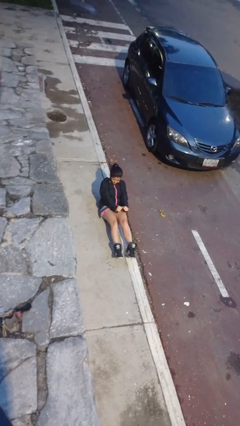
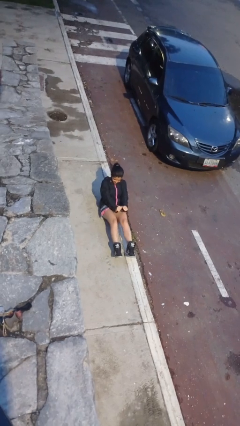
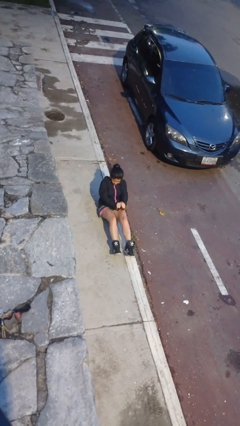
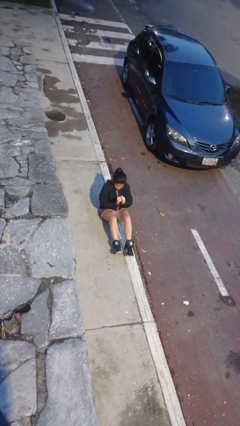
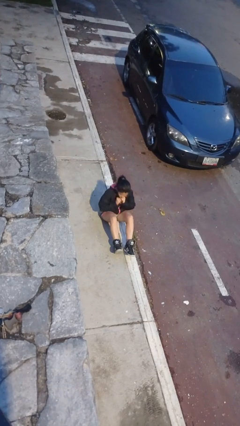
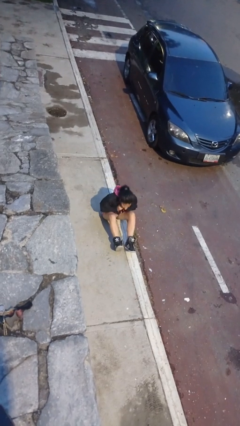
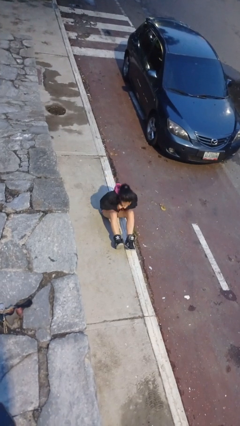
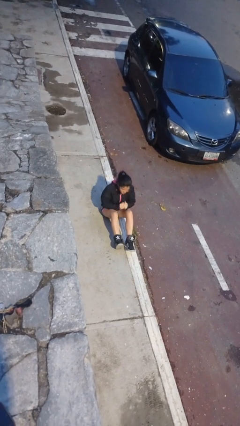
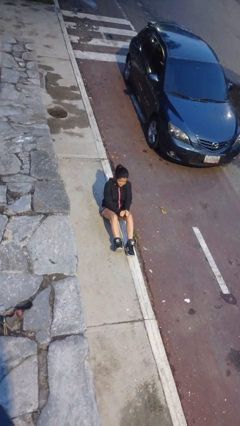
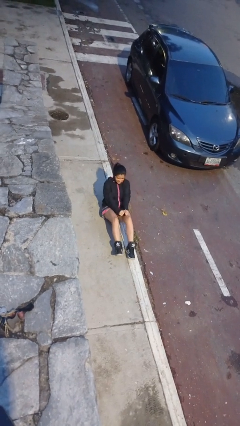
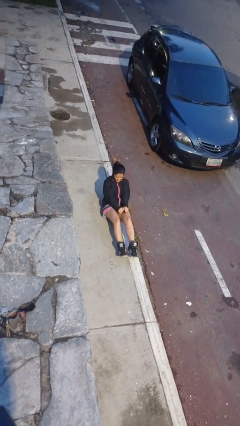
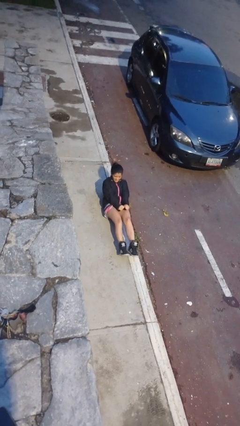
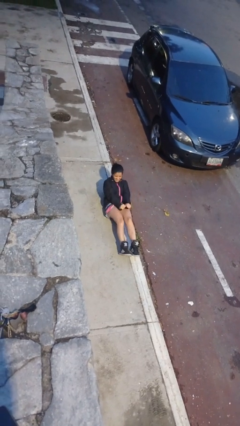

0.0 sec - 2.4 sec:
person exercises with situp

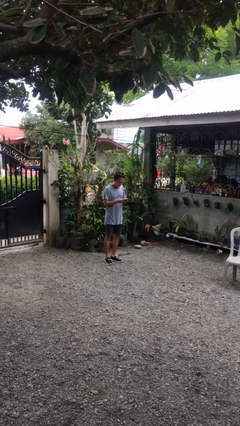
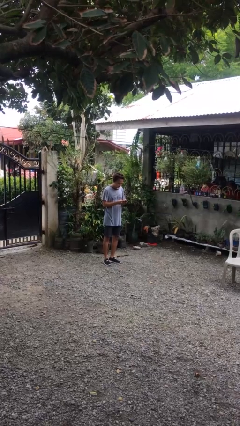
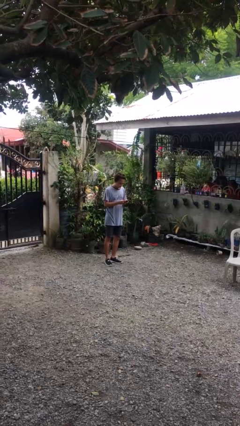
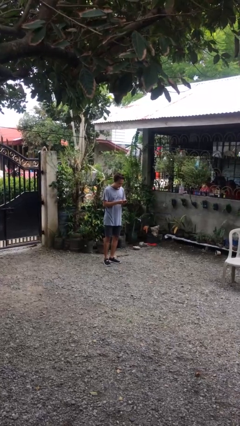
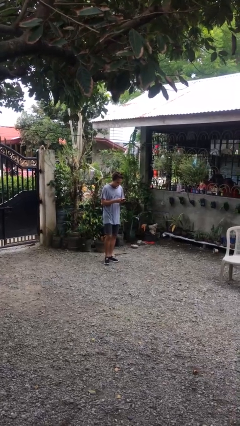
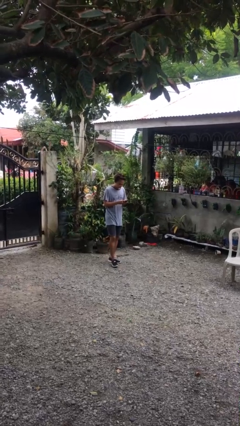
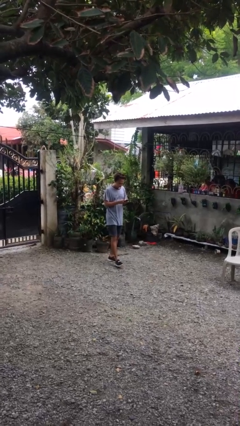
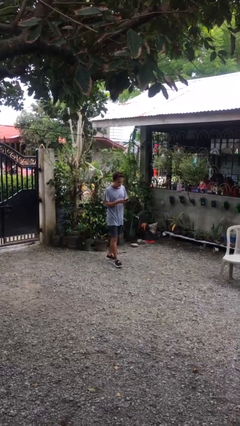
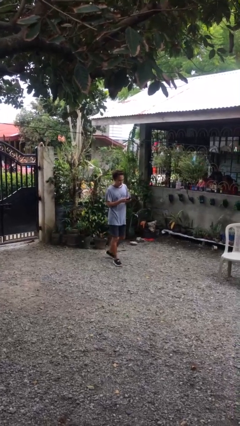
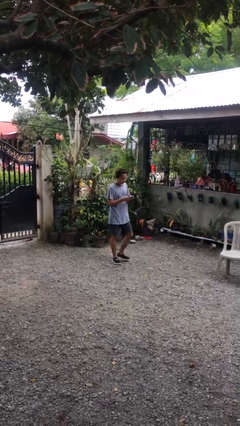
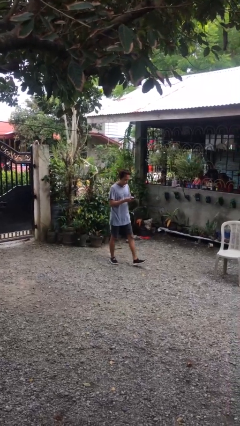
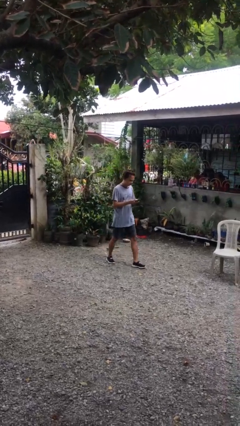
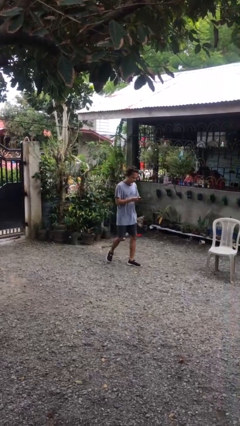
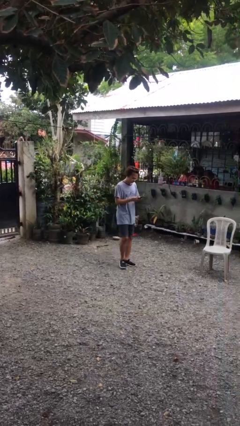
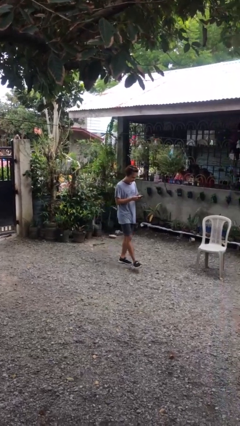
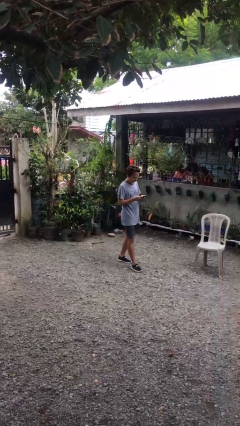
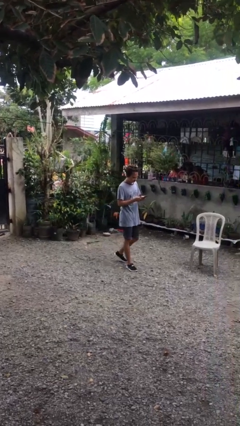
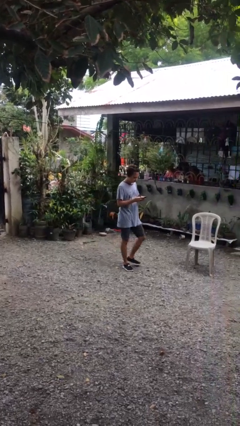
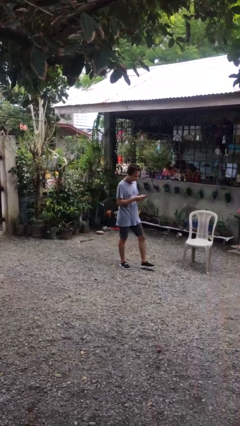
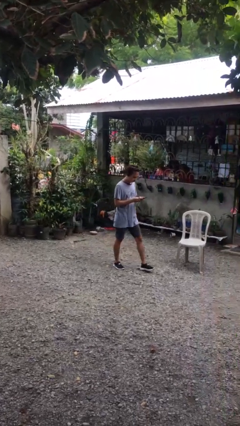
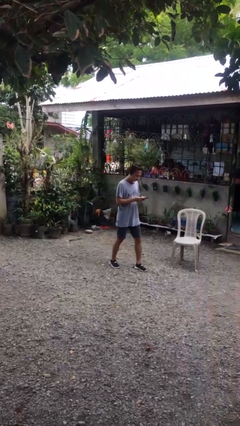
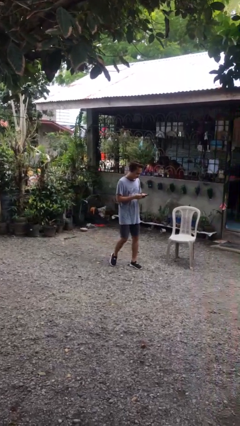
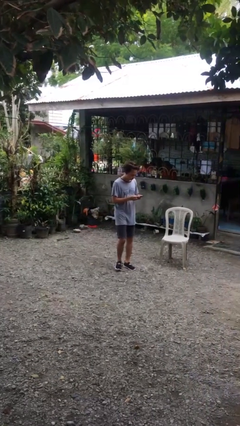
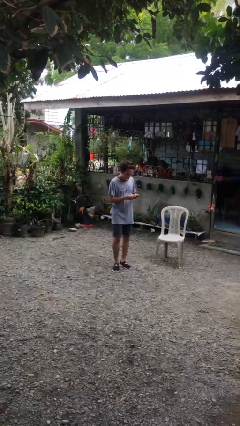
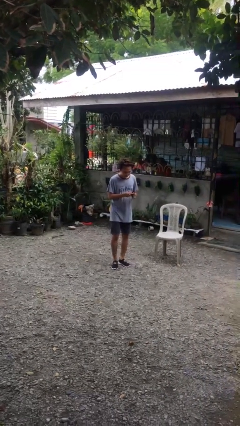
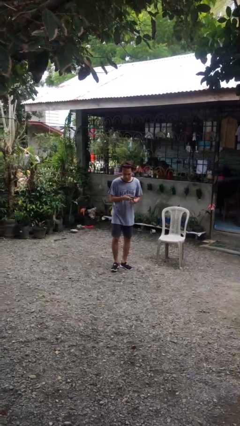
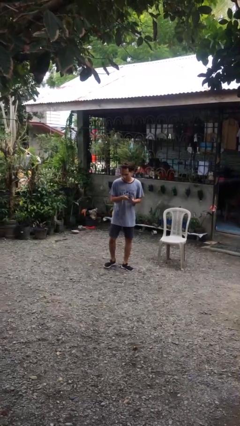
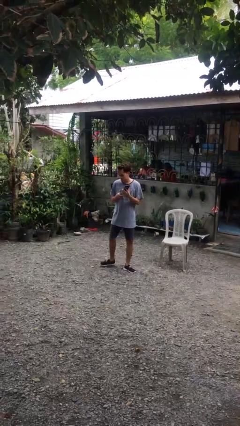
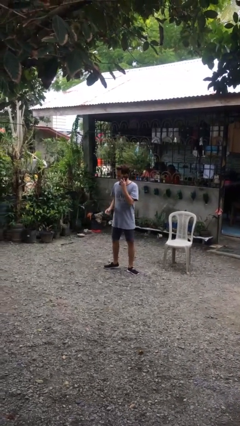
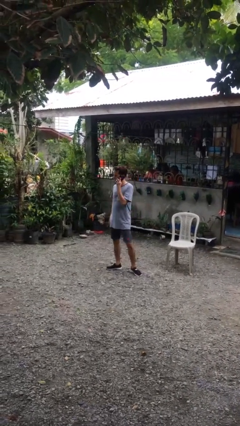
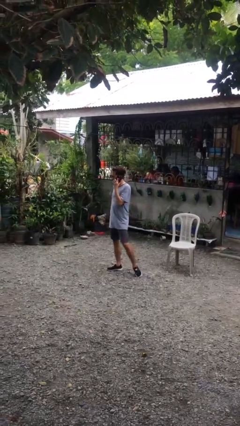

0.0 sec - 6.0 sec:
person texts on phone

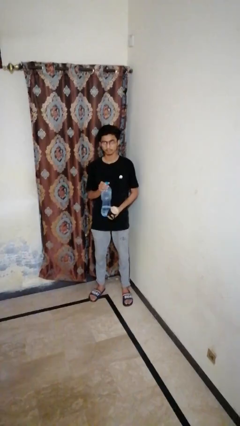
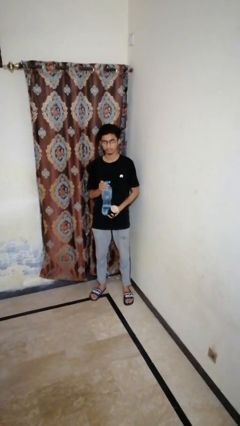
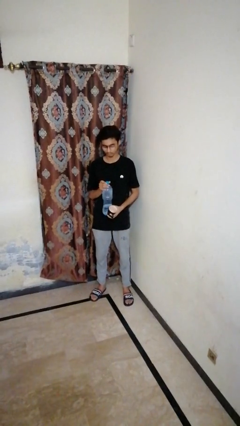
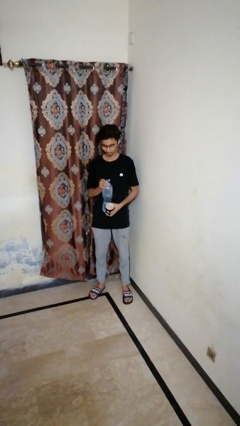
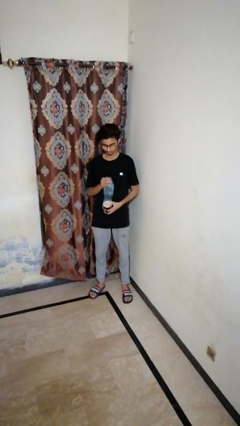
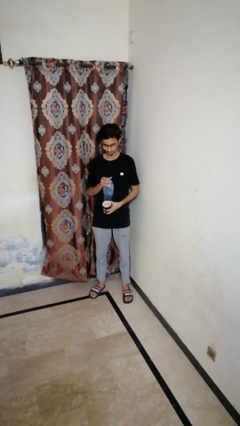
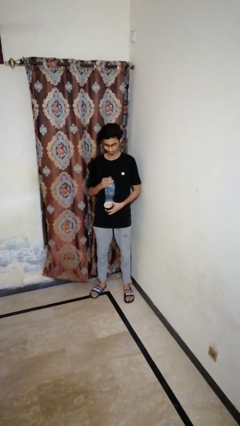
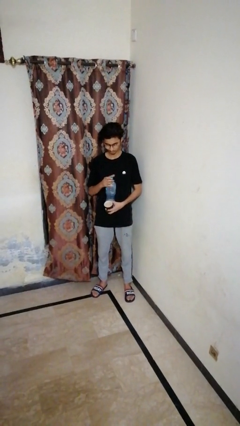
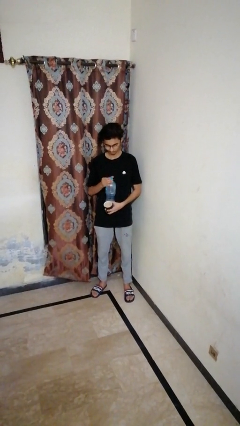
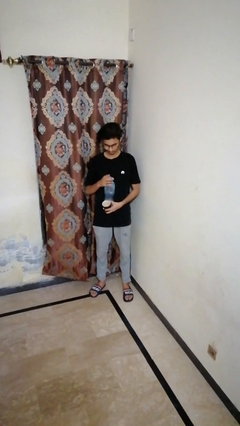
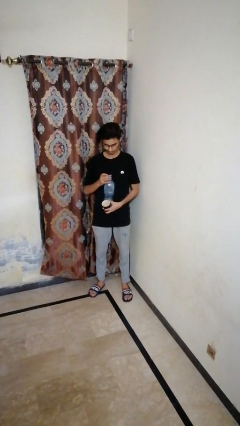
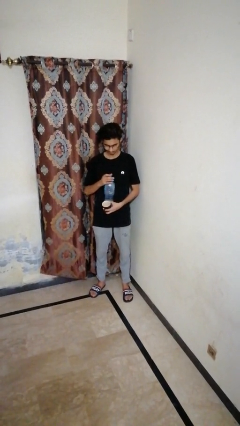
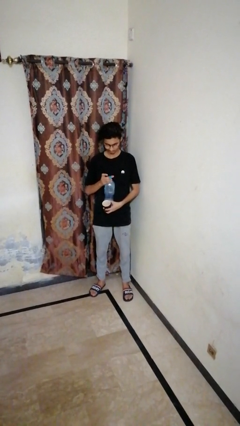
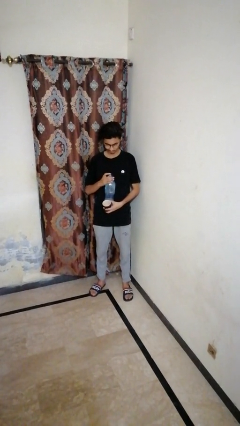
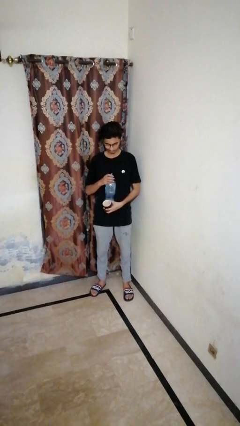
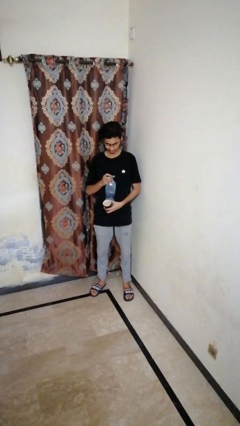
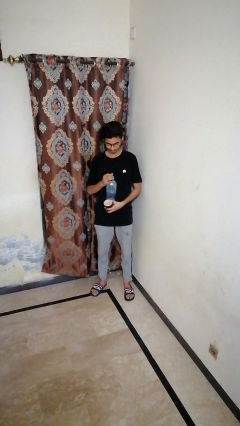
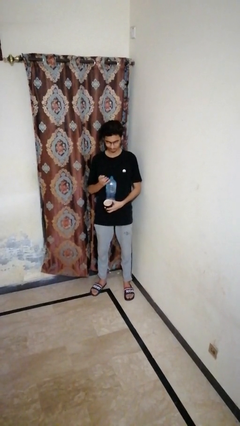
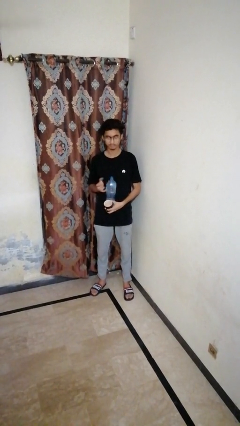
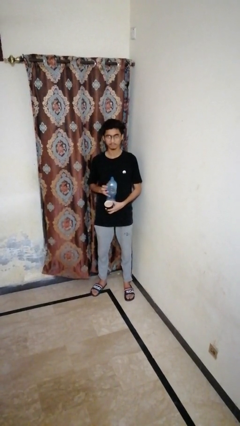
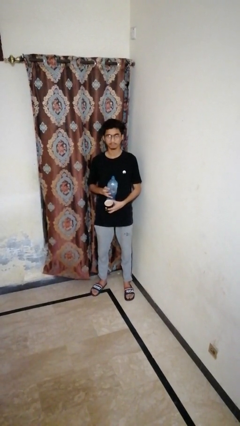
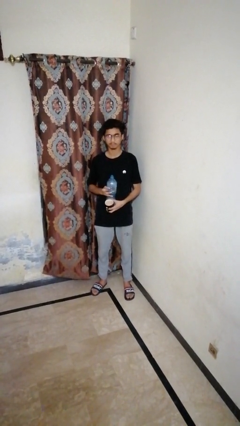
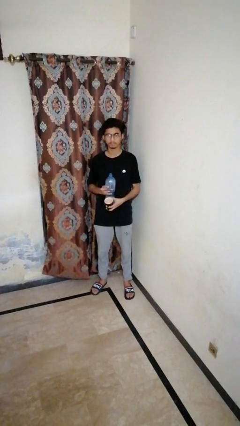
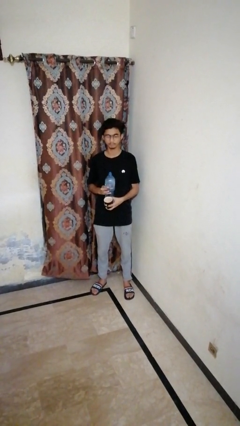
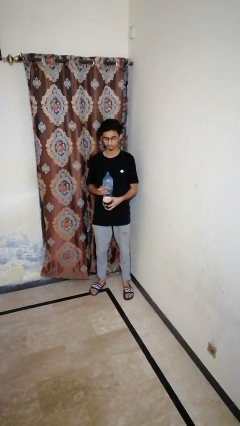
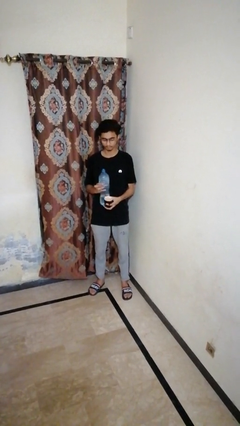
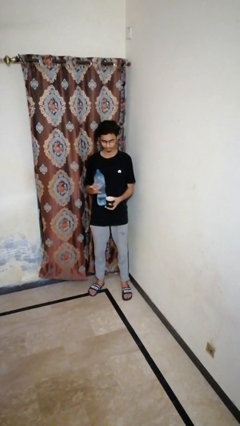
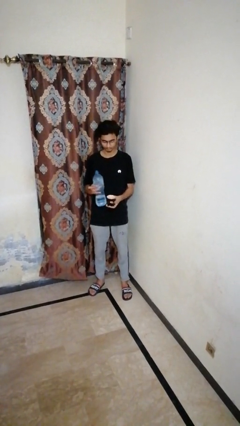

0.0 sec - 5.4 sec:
person unscrews lid from bottle

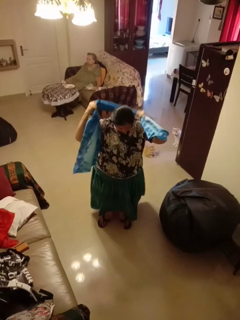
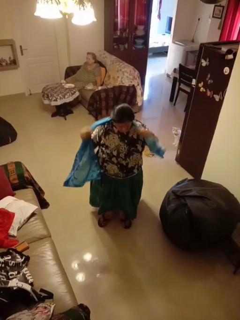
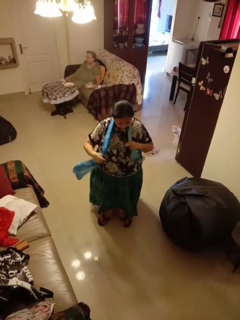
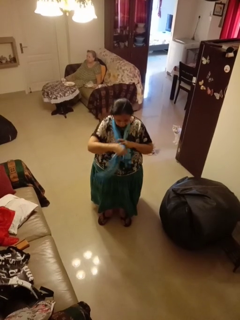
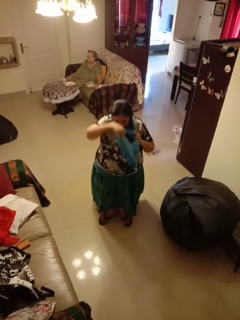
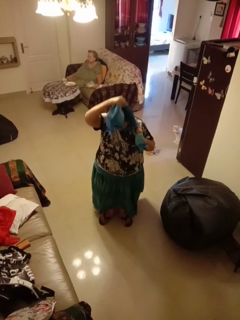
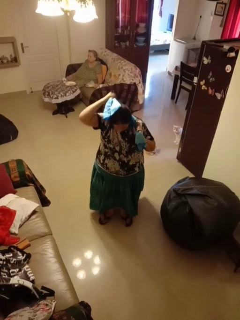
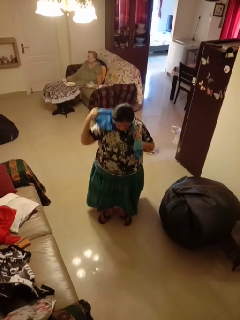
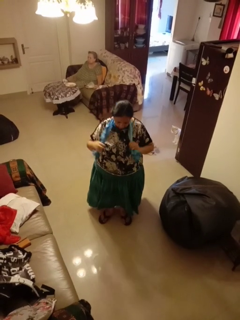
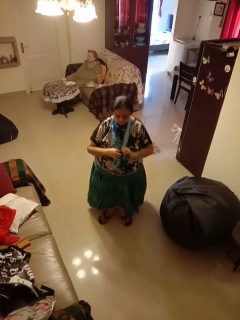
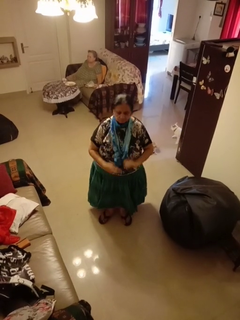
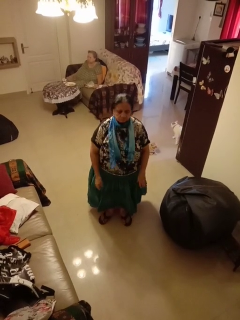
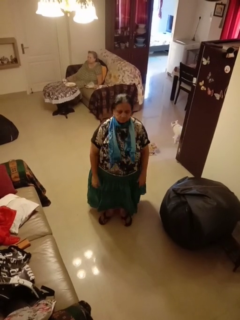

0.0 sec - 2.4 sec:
person puts on scarf

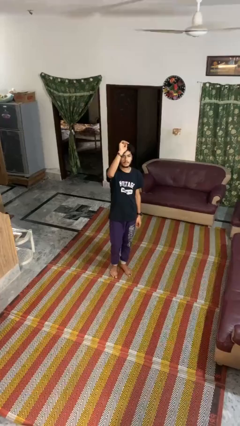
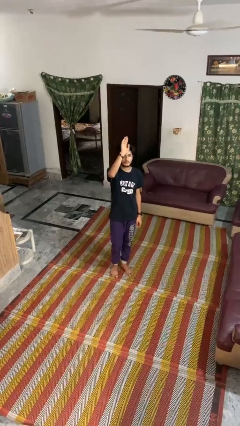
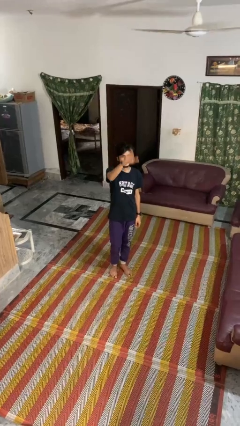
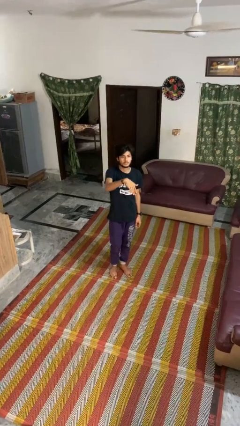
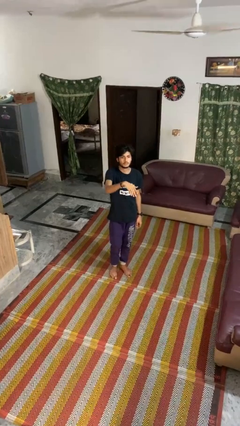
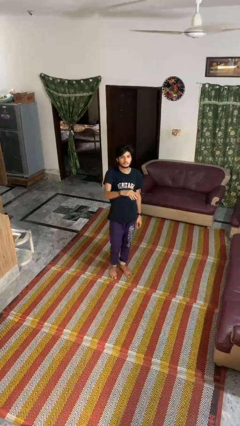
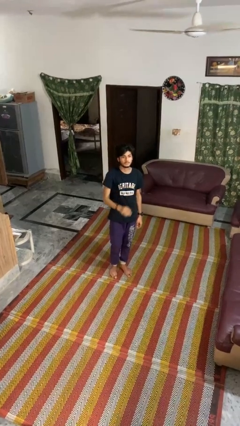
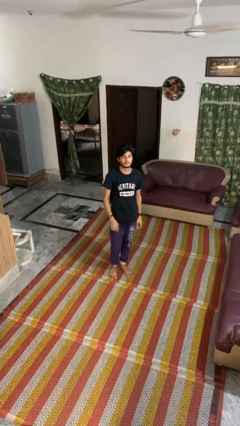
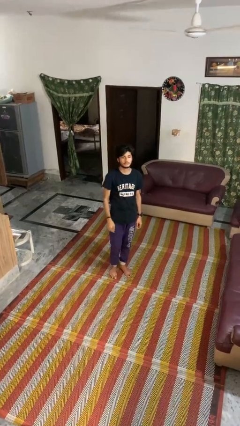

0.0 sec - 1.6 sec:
person gestures swipe down
